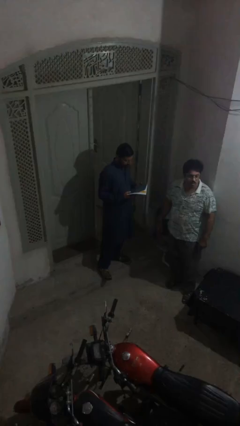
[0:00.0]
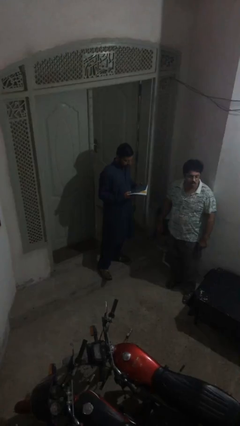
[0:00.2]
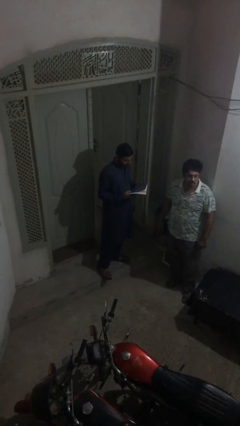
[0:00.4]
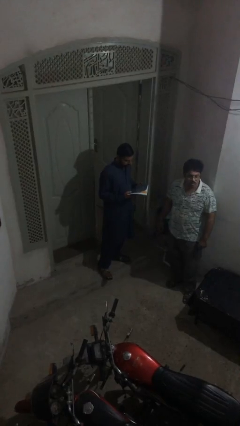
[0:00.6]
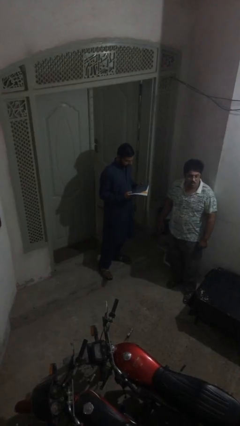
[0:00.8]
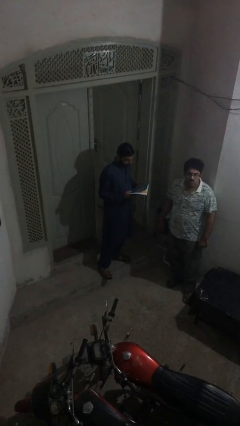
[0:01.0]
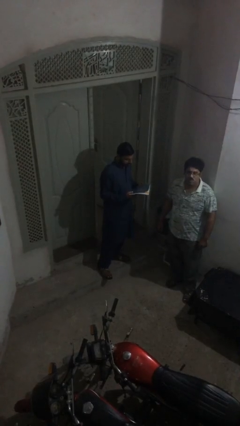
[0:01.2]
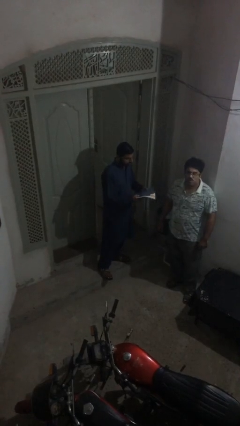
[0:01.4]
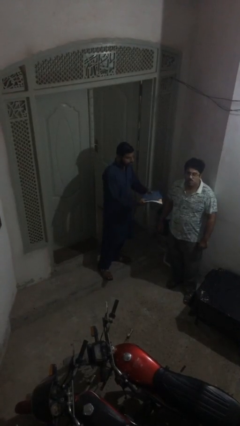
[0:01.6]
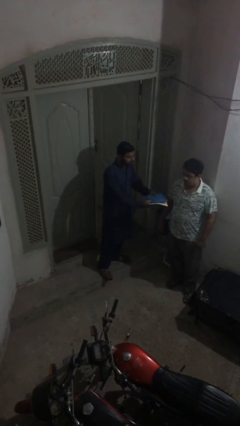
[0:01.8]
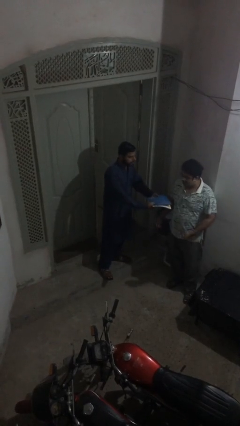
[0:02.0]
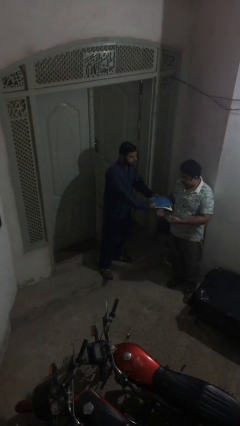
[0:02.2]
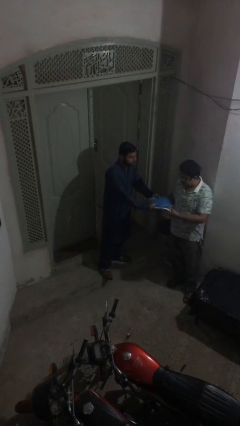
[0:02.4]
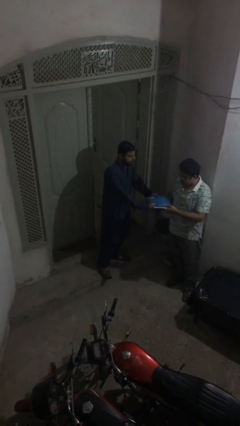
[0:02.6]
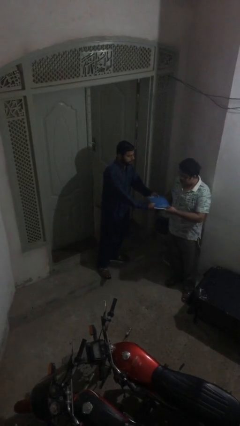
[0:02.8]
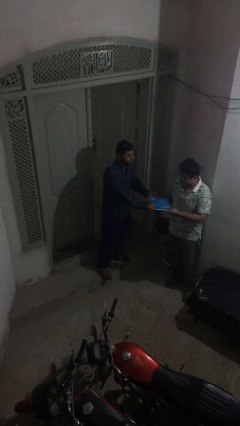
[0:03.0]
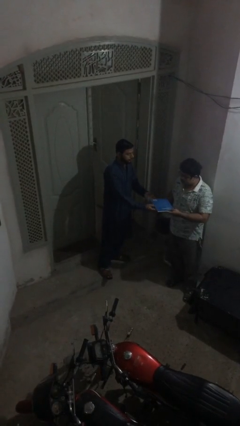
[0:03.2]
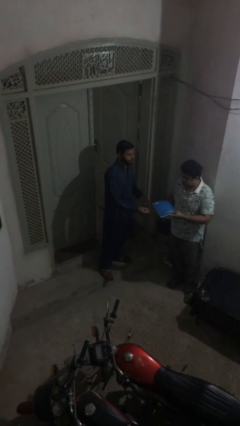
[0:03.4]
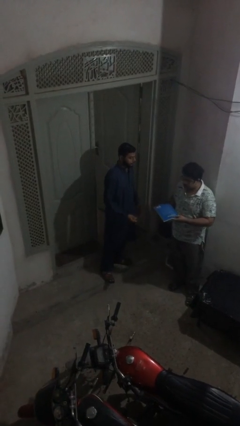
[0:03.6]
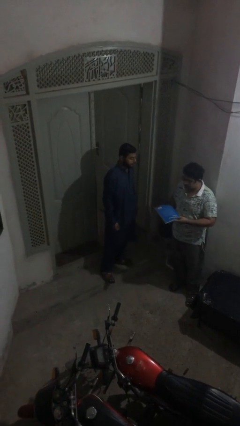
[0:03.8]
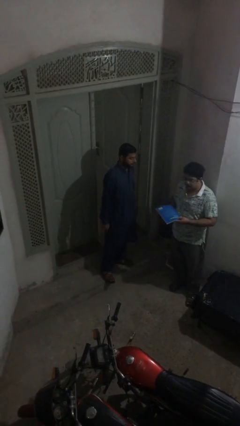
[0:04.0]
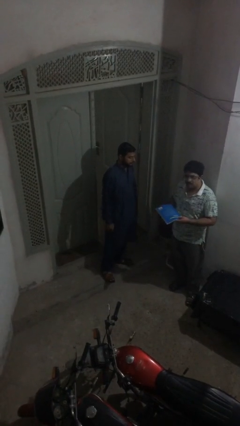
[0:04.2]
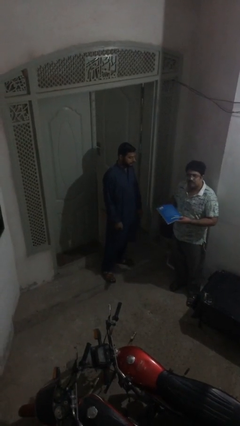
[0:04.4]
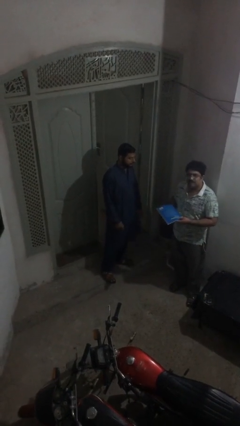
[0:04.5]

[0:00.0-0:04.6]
person transfers object to person

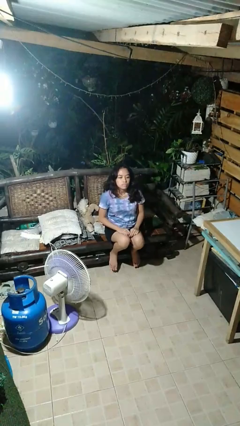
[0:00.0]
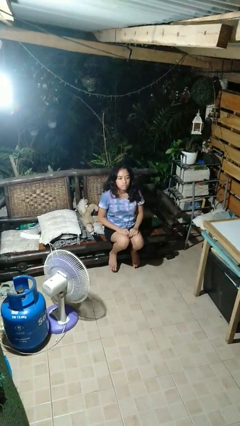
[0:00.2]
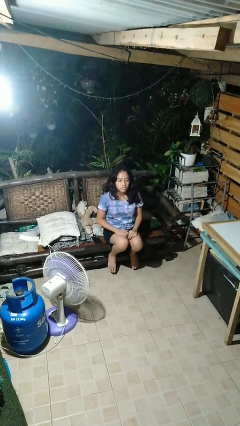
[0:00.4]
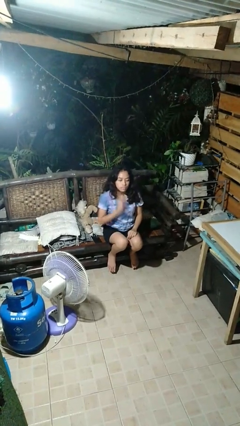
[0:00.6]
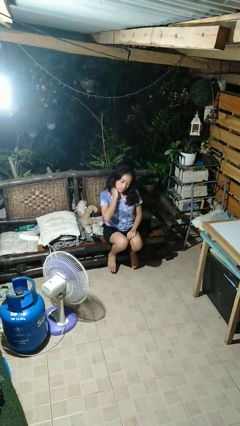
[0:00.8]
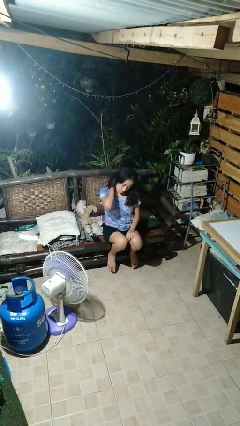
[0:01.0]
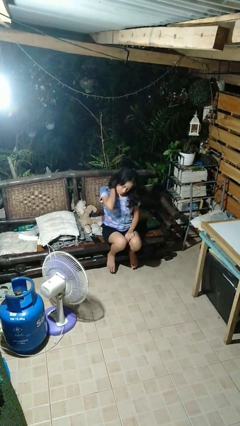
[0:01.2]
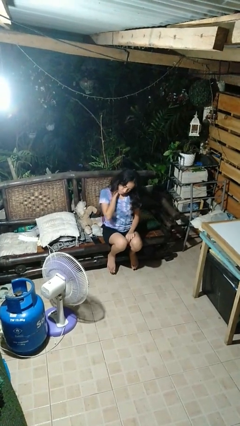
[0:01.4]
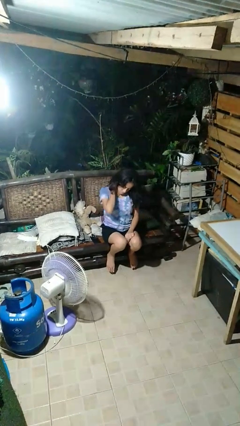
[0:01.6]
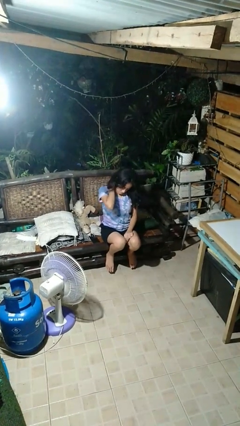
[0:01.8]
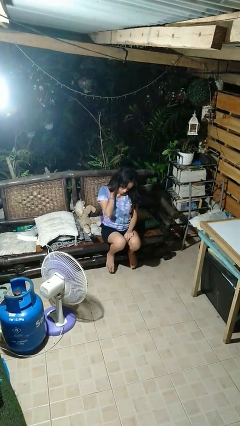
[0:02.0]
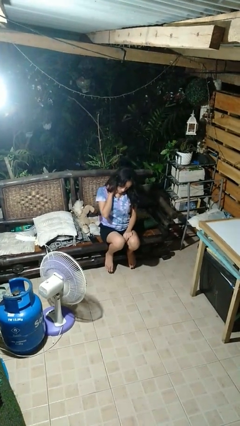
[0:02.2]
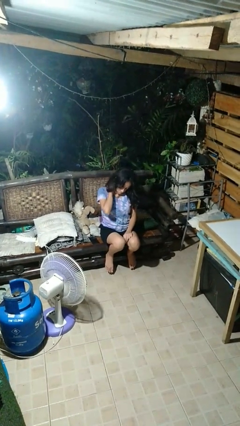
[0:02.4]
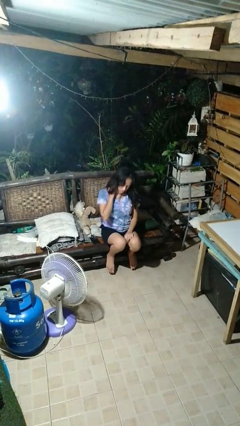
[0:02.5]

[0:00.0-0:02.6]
person rubs neck

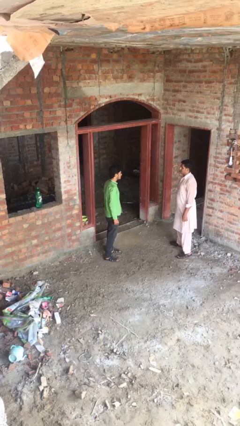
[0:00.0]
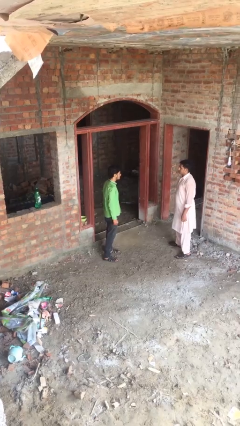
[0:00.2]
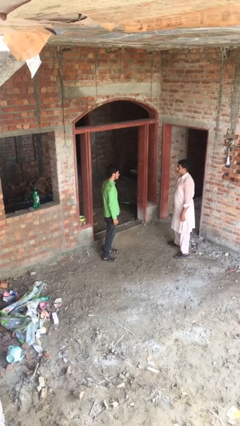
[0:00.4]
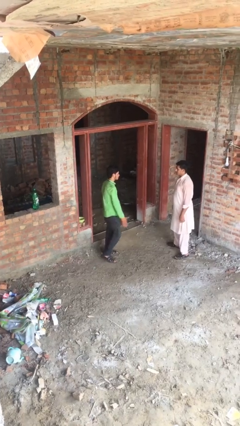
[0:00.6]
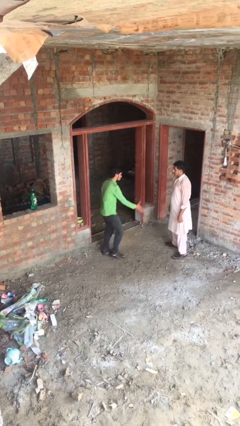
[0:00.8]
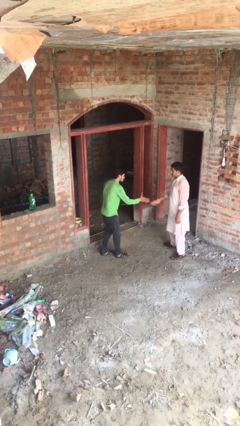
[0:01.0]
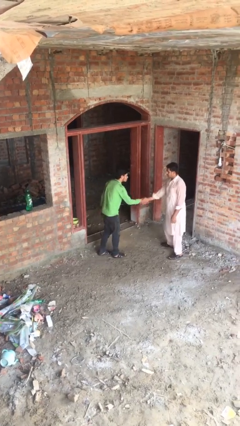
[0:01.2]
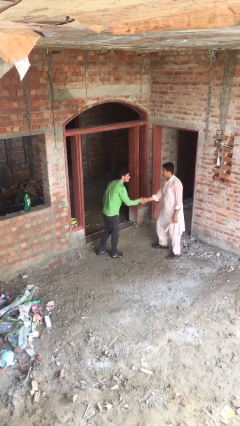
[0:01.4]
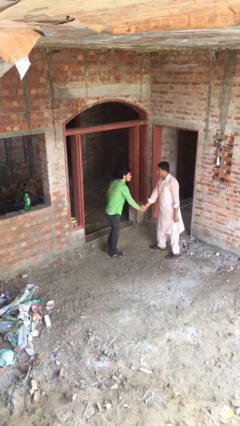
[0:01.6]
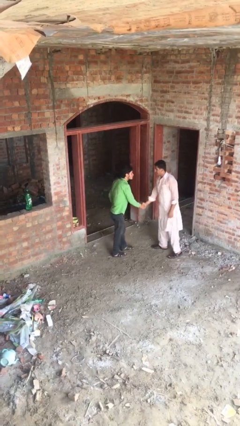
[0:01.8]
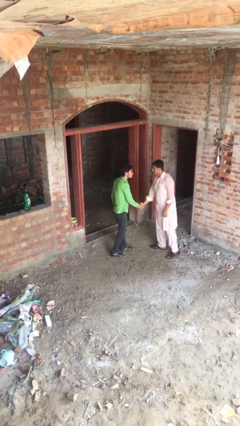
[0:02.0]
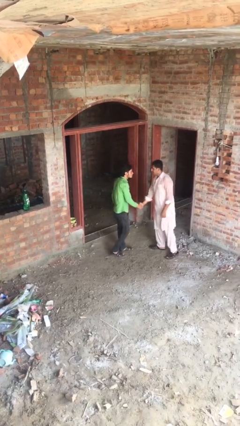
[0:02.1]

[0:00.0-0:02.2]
person shakes hand

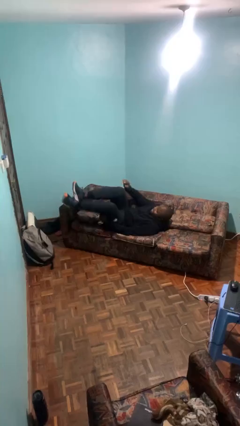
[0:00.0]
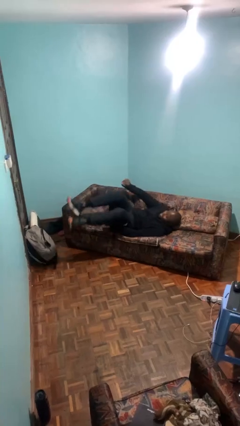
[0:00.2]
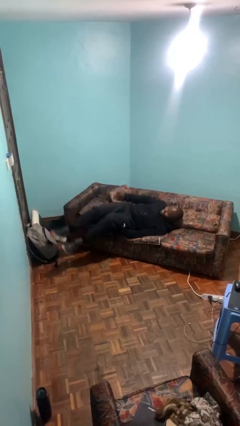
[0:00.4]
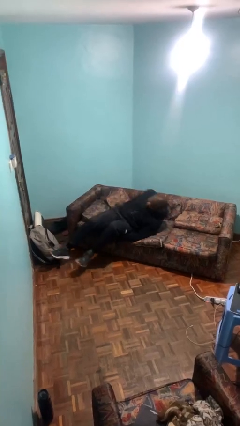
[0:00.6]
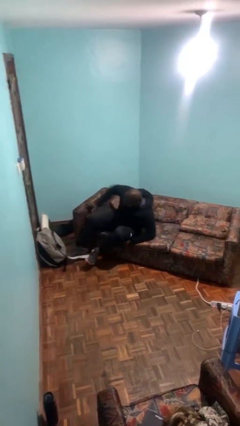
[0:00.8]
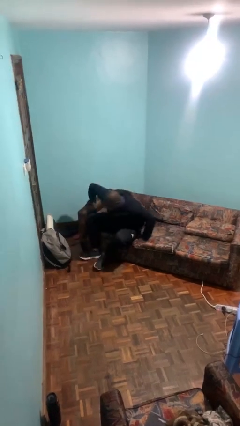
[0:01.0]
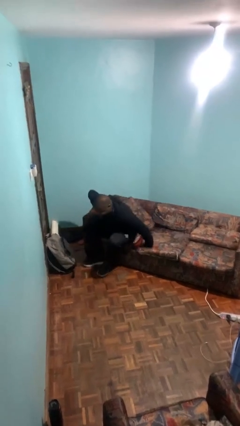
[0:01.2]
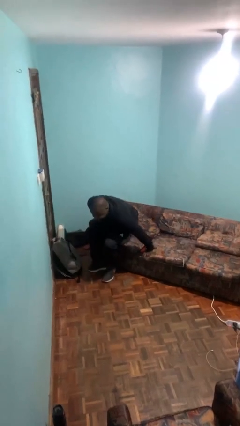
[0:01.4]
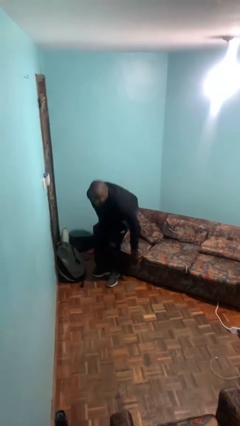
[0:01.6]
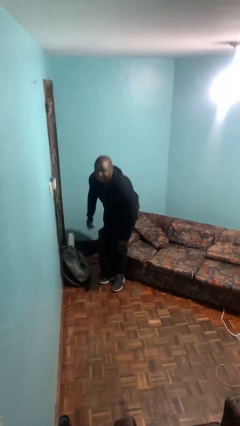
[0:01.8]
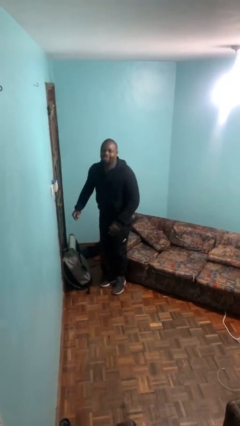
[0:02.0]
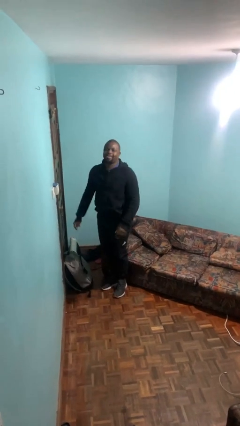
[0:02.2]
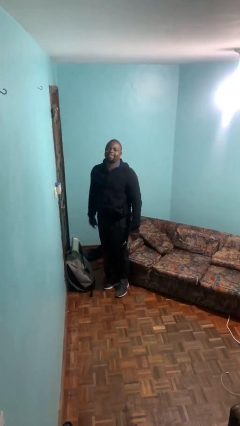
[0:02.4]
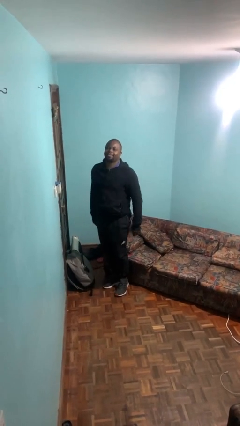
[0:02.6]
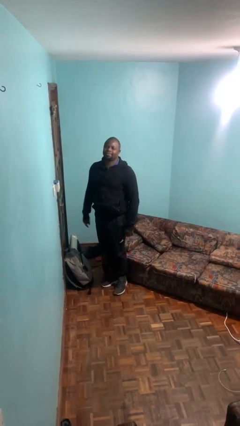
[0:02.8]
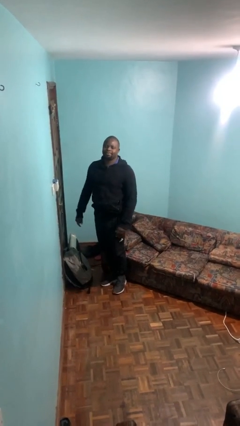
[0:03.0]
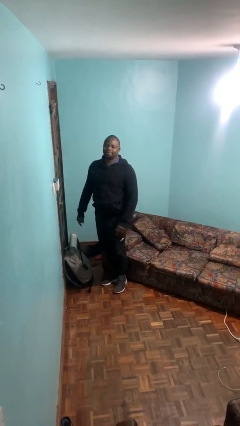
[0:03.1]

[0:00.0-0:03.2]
person stands up

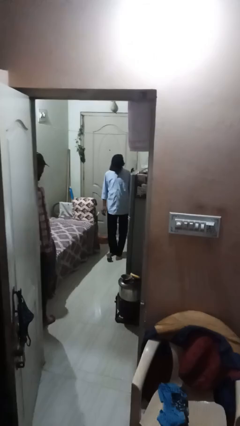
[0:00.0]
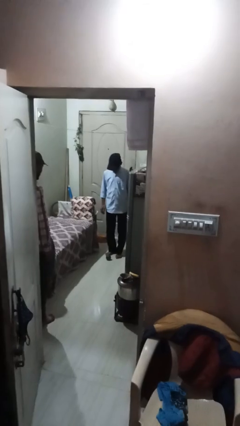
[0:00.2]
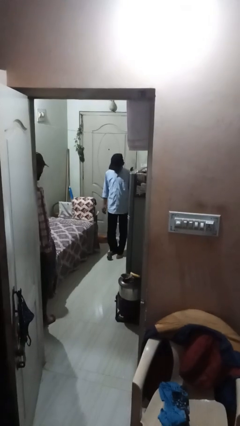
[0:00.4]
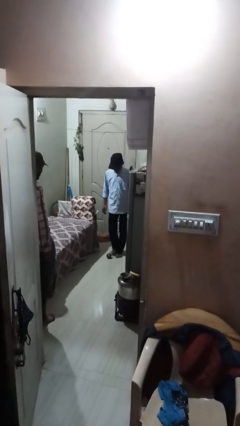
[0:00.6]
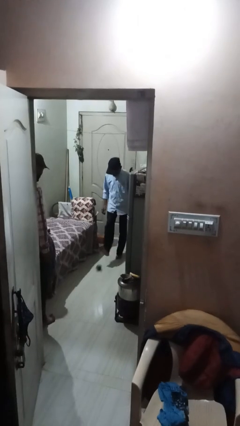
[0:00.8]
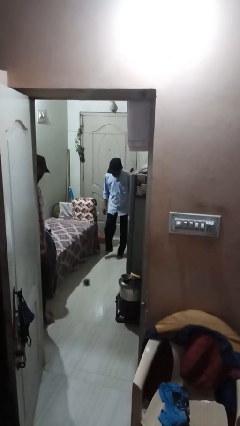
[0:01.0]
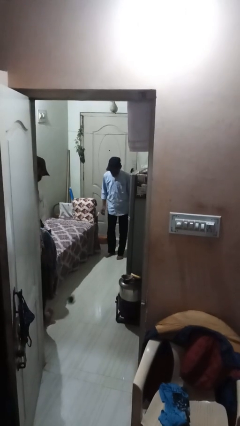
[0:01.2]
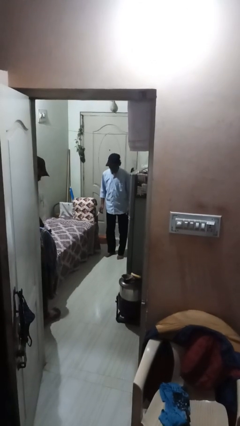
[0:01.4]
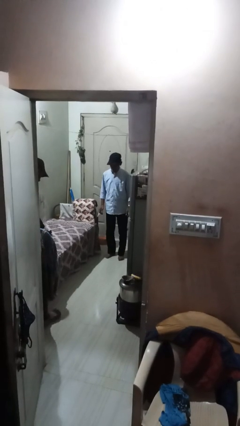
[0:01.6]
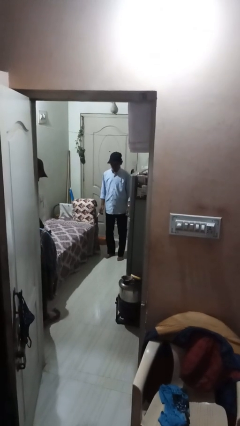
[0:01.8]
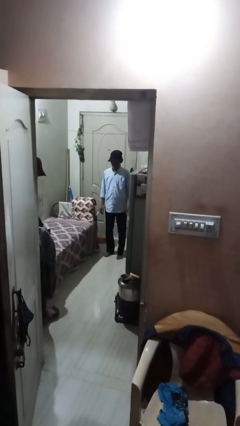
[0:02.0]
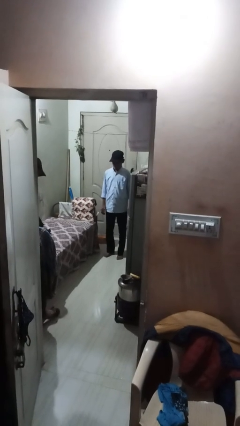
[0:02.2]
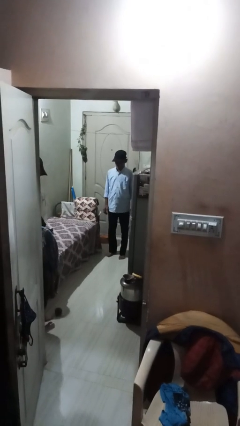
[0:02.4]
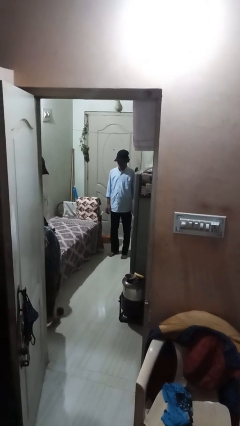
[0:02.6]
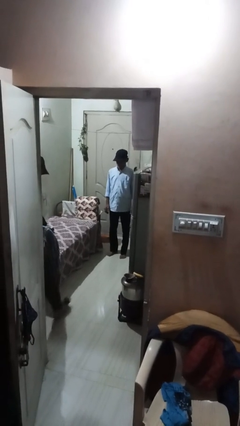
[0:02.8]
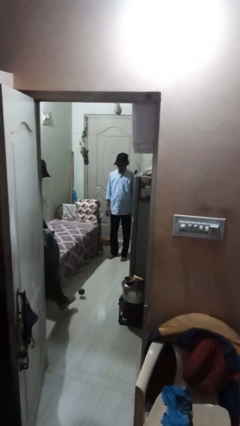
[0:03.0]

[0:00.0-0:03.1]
person kicks object to person

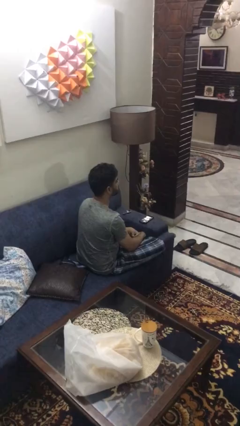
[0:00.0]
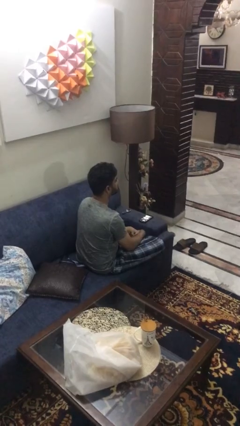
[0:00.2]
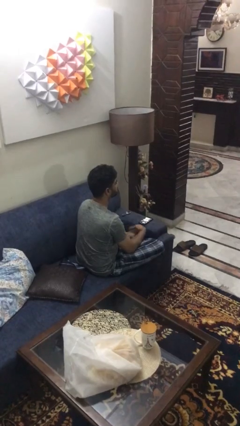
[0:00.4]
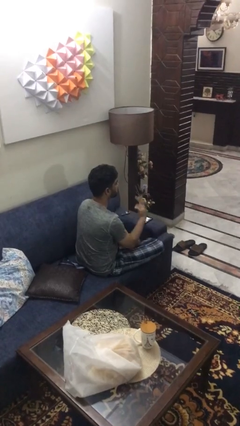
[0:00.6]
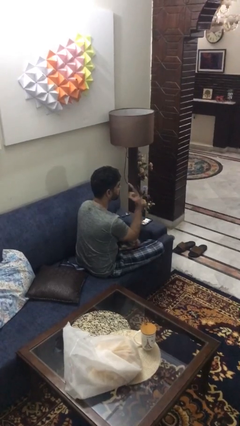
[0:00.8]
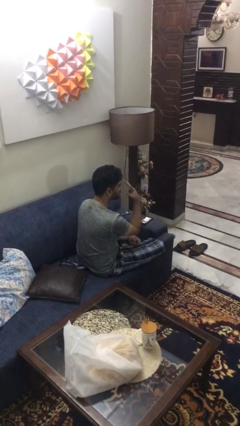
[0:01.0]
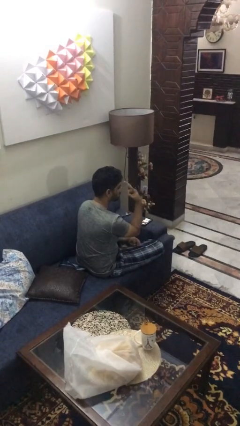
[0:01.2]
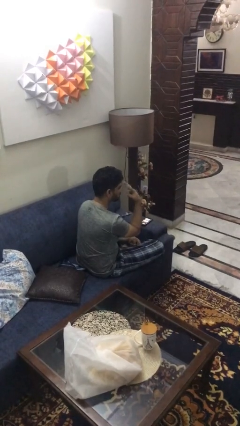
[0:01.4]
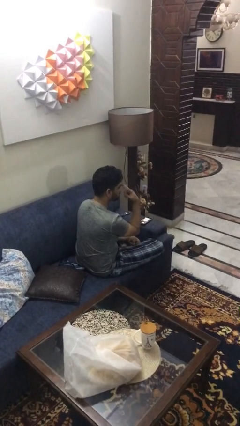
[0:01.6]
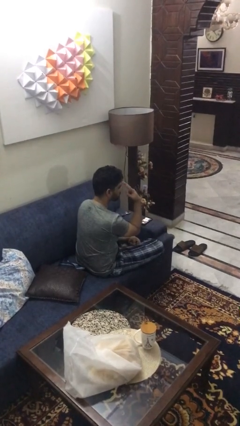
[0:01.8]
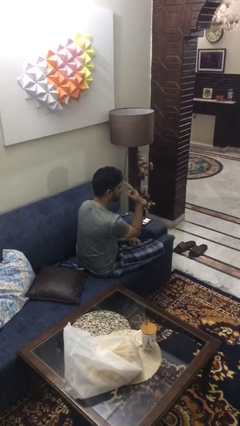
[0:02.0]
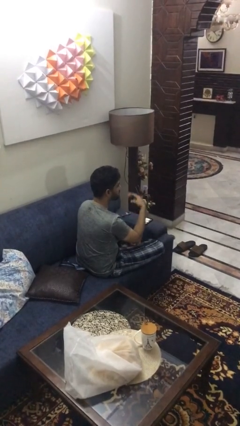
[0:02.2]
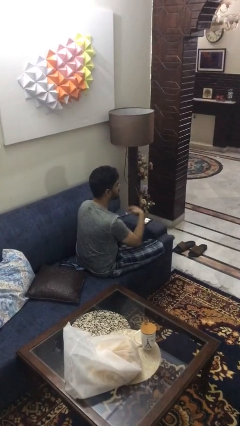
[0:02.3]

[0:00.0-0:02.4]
person gestures watch closely
